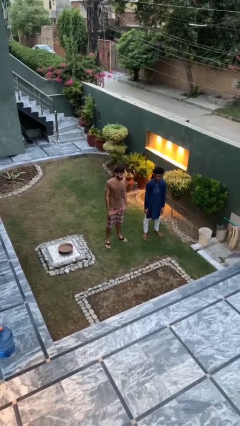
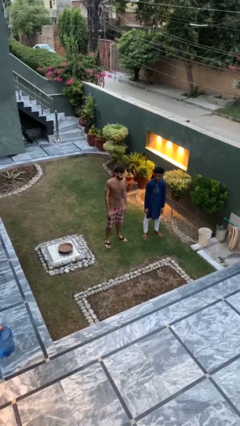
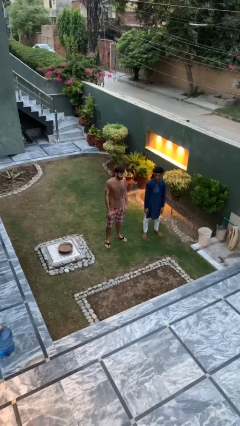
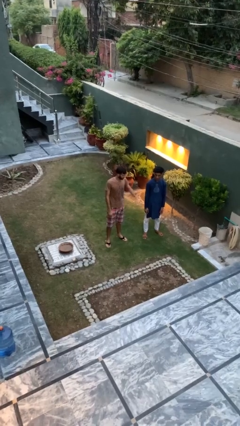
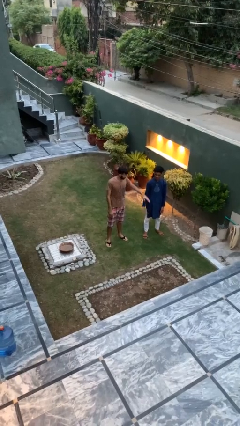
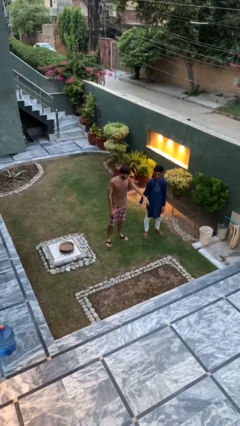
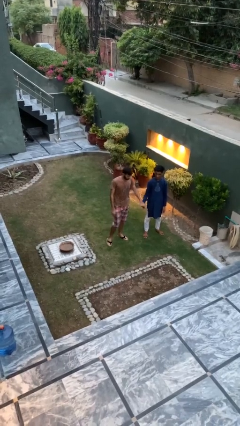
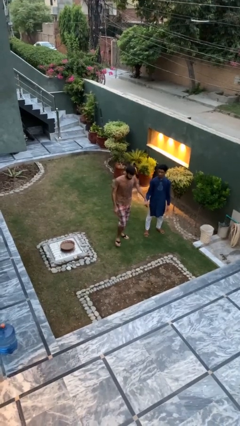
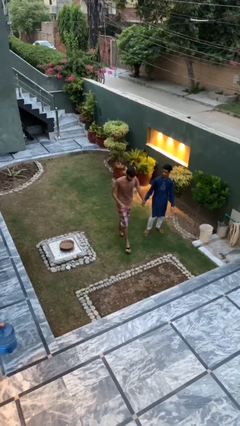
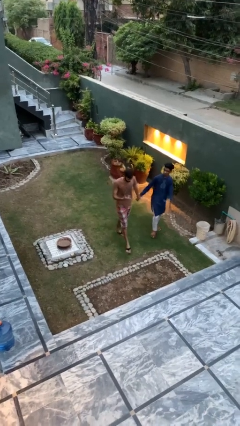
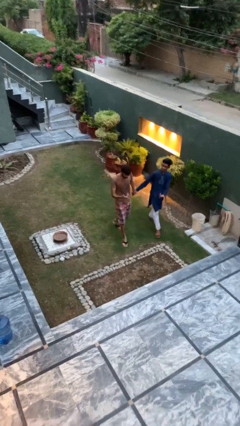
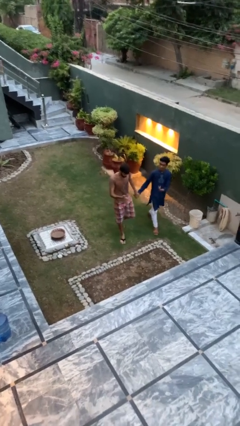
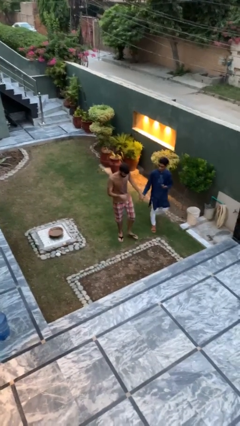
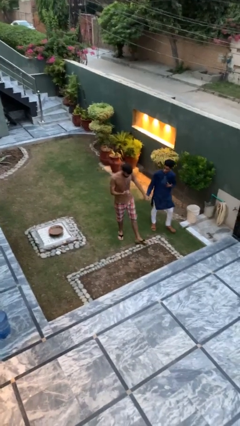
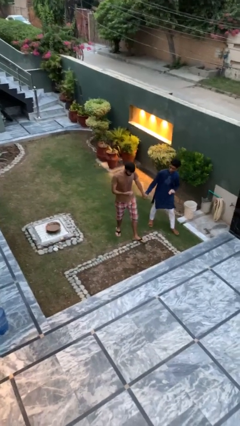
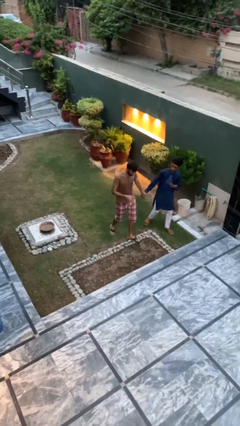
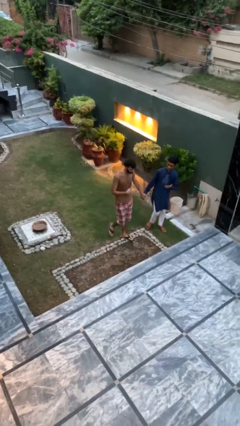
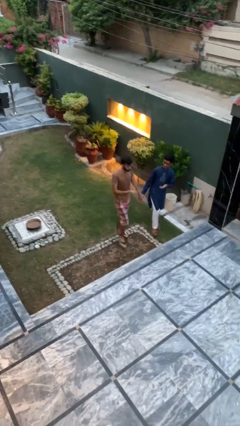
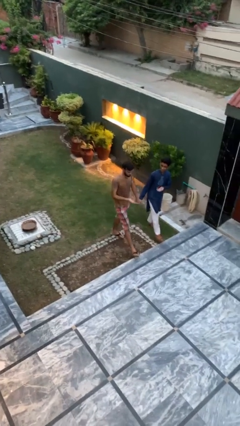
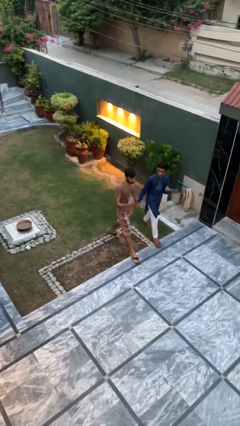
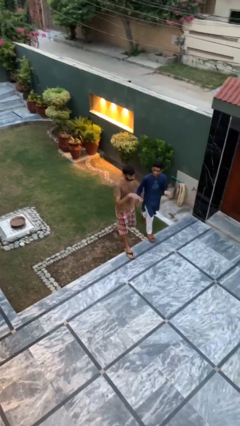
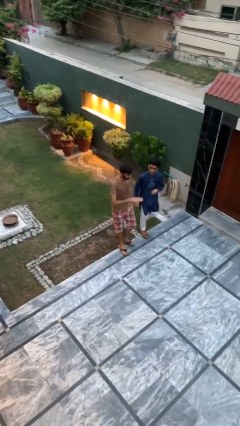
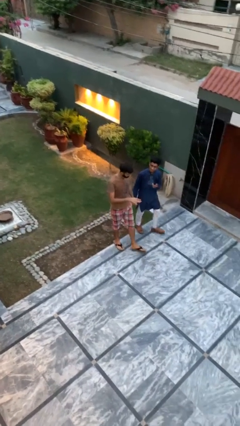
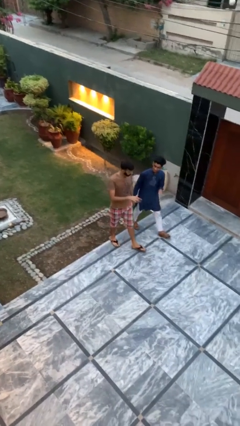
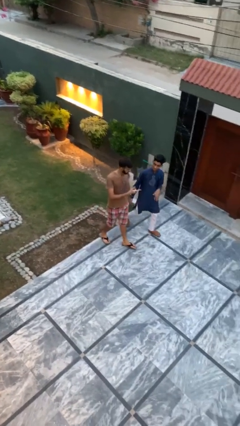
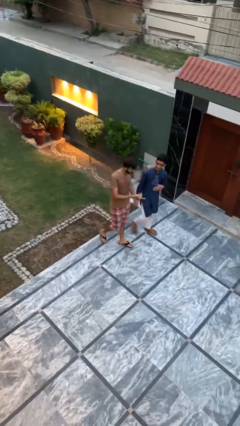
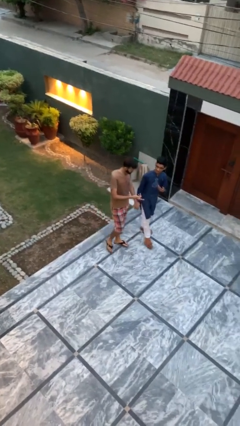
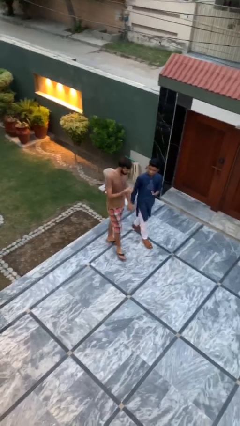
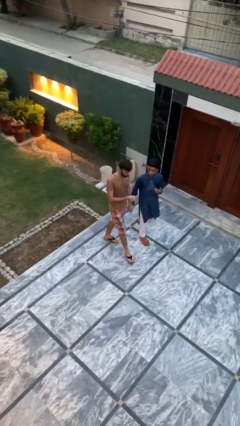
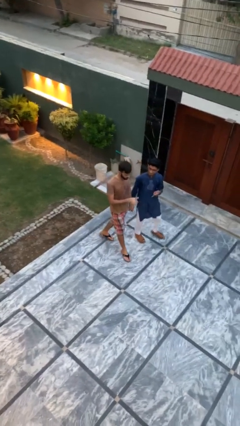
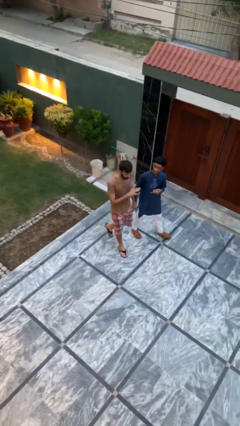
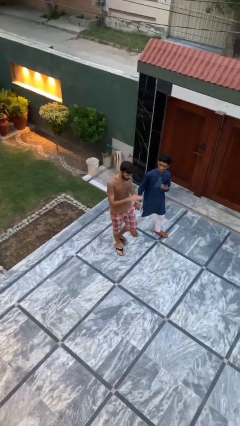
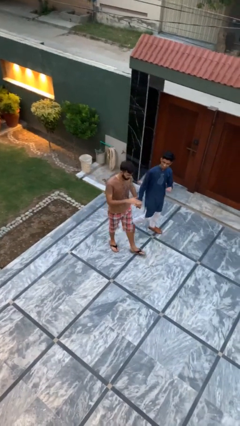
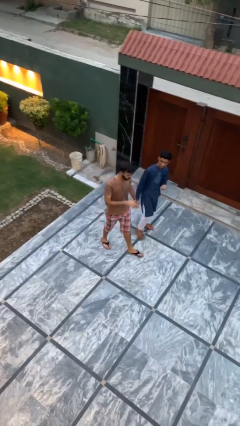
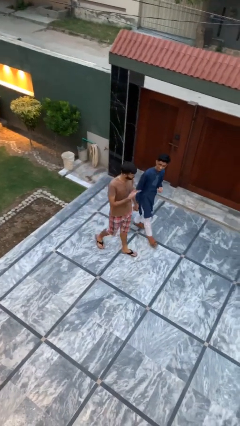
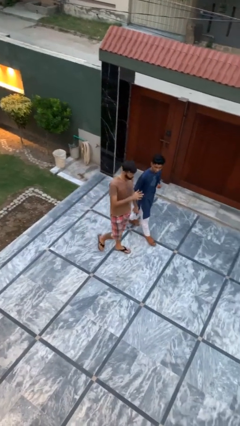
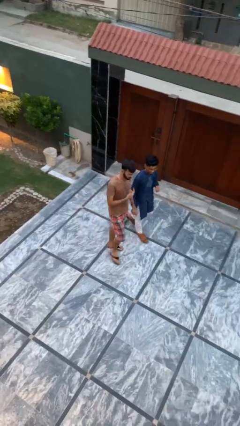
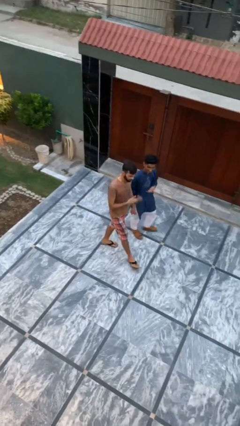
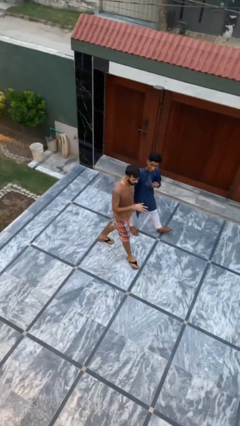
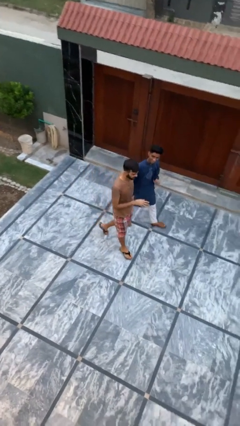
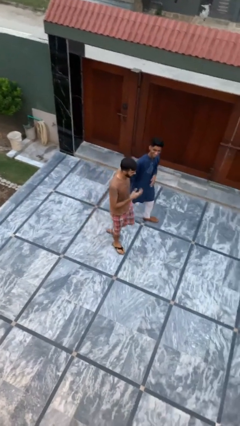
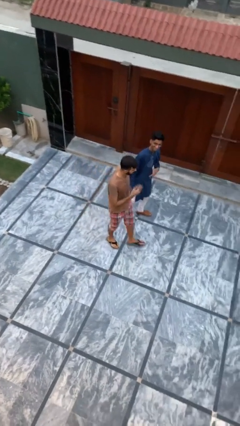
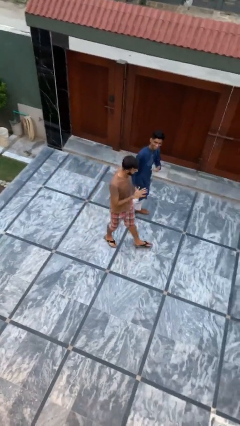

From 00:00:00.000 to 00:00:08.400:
person holds hand

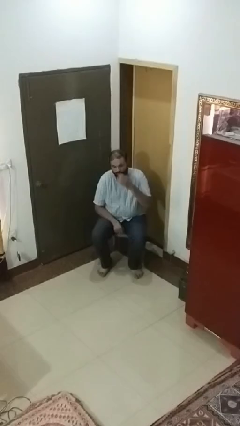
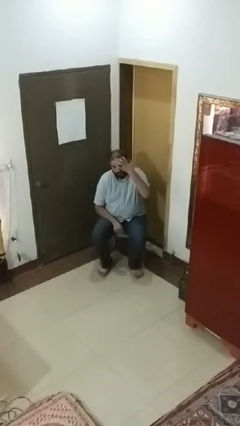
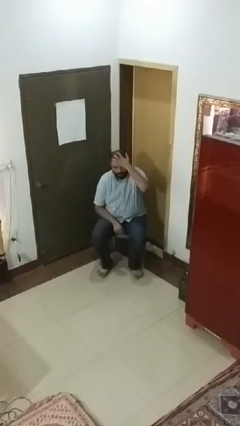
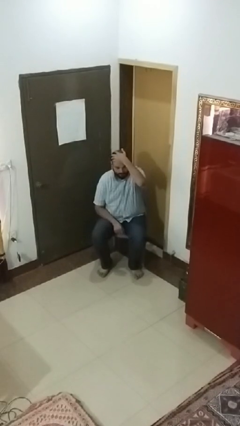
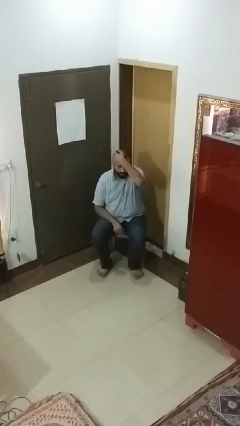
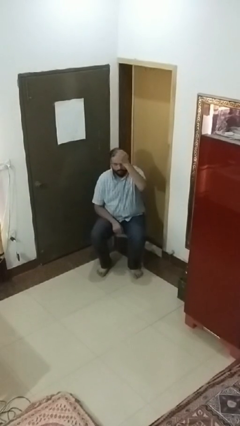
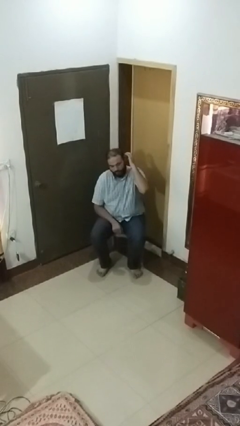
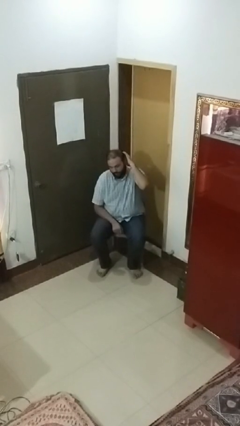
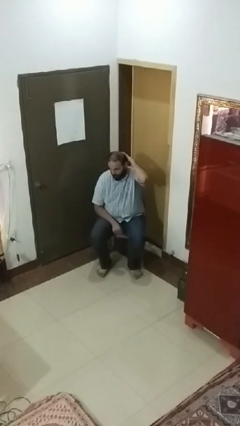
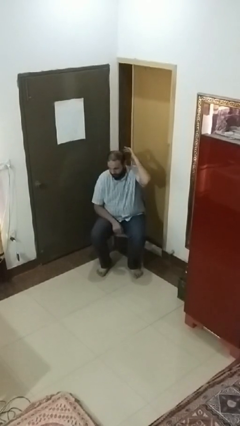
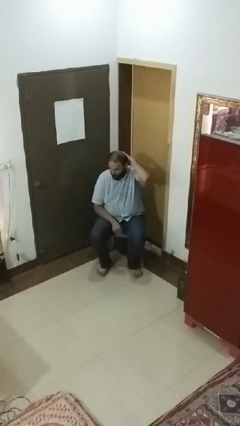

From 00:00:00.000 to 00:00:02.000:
person strokes hair

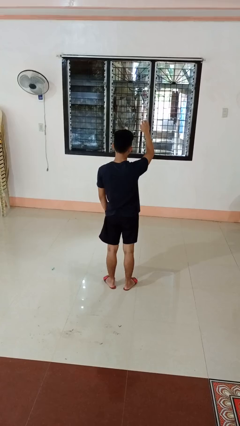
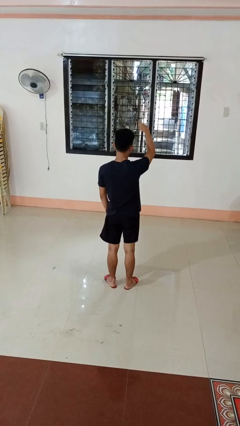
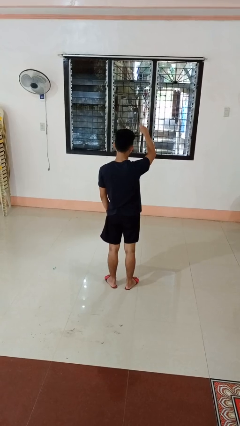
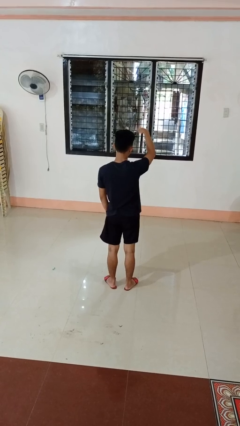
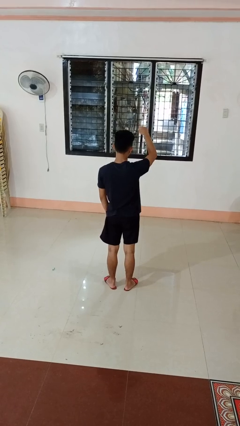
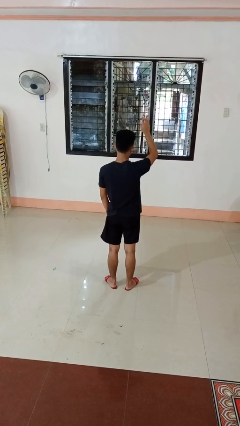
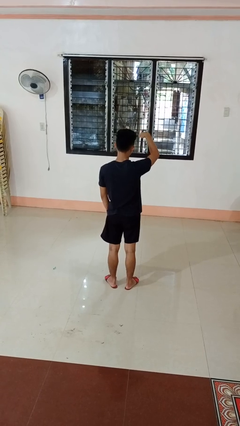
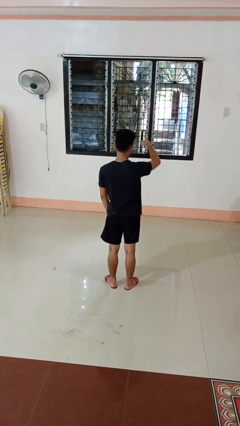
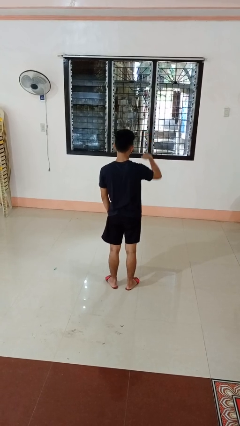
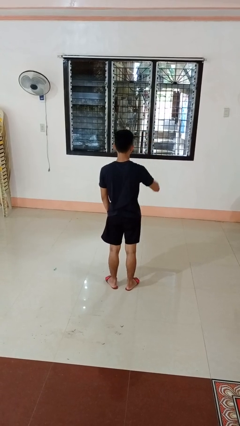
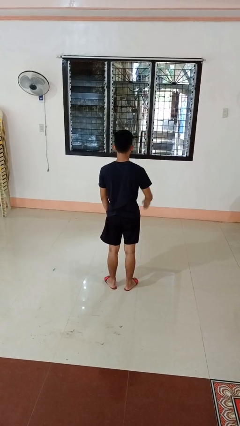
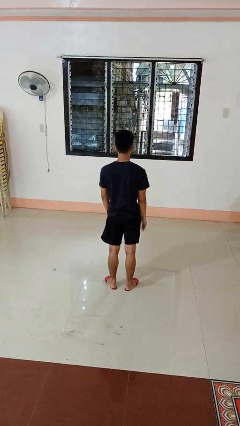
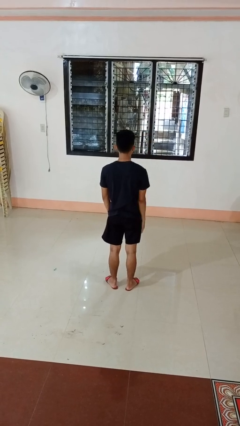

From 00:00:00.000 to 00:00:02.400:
person gestures come here

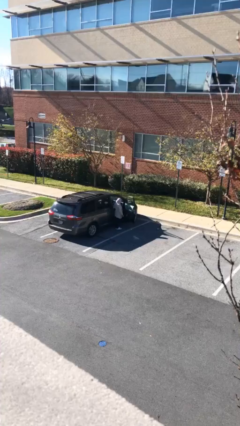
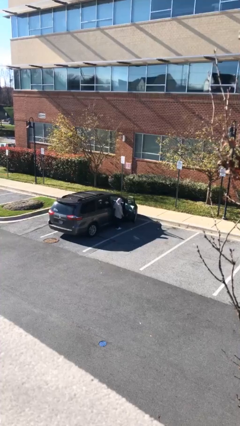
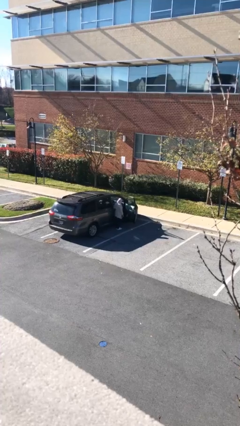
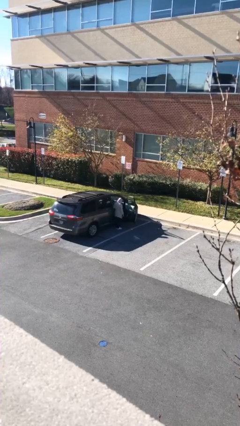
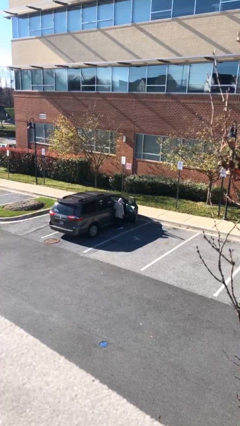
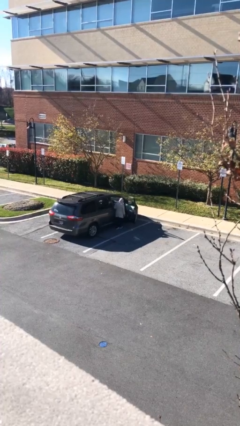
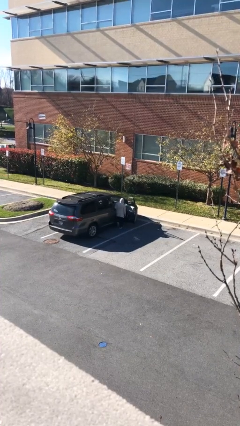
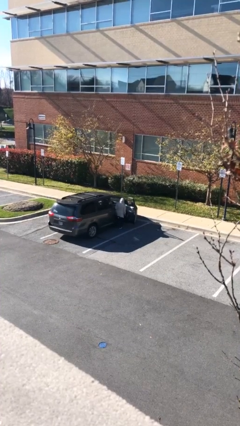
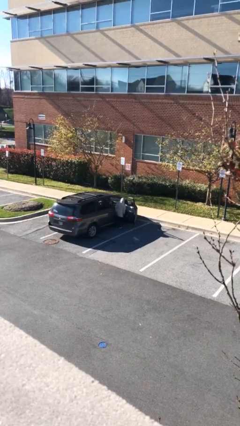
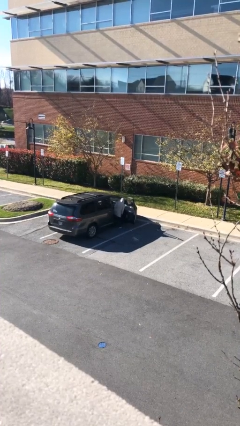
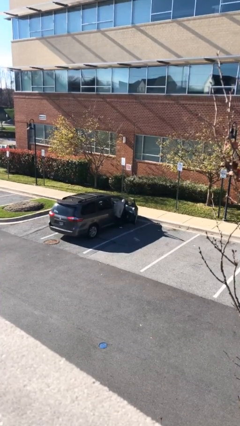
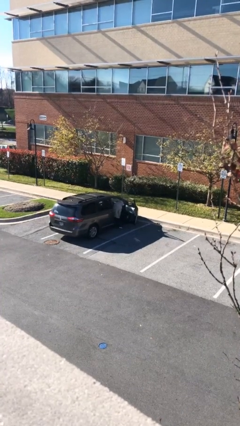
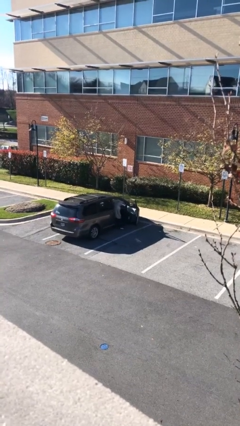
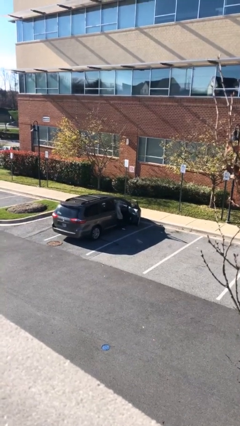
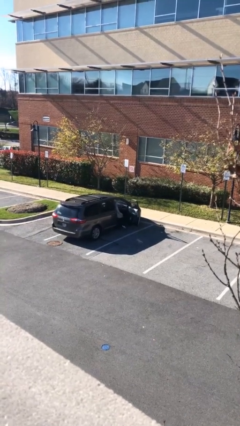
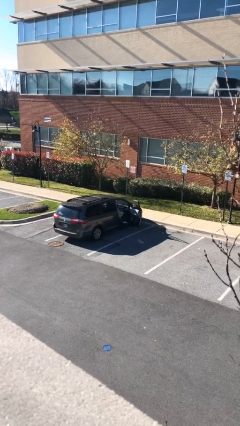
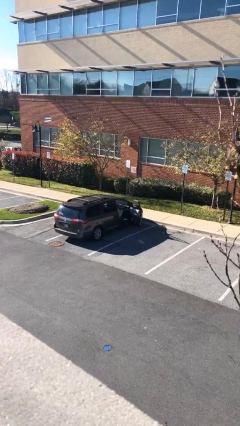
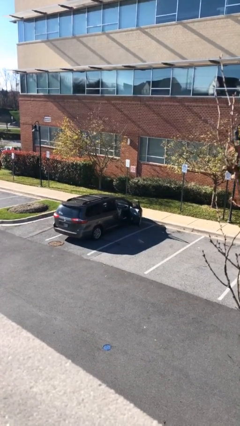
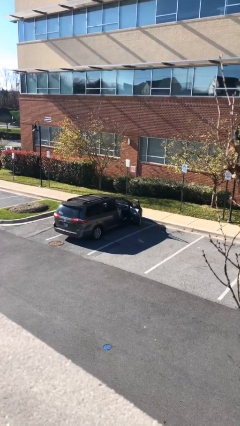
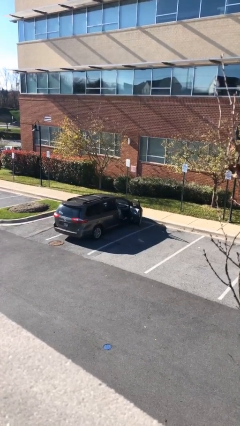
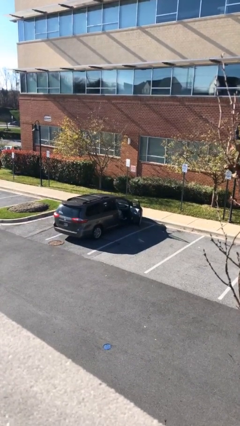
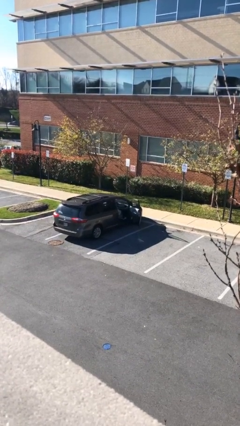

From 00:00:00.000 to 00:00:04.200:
person enters car

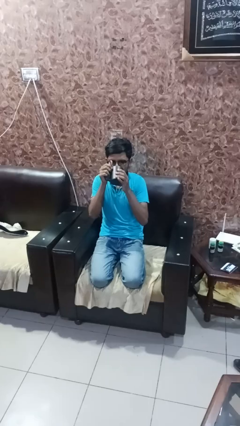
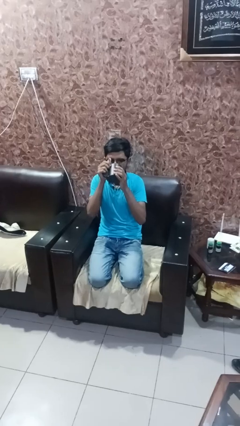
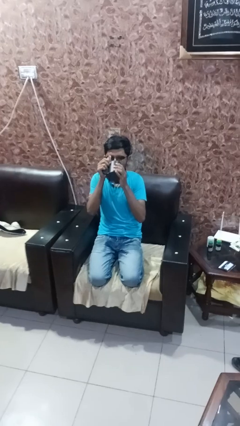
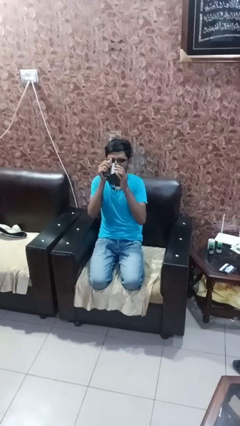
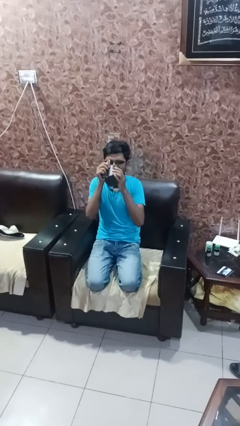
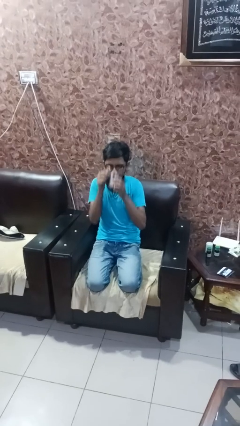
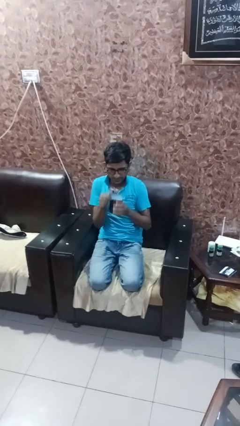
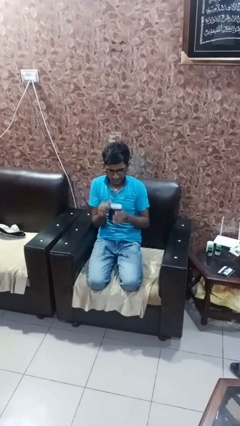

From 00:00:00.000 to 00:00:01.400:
person drinks from mug
